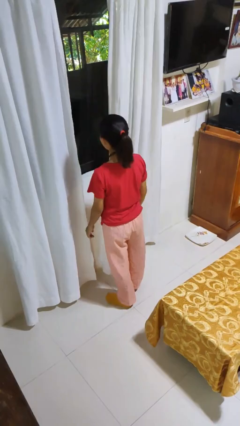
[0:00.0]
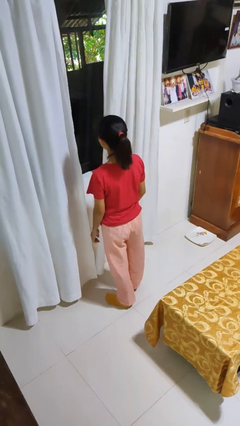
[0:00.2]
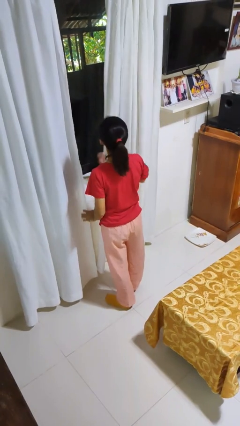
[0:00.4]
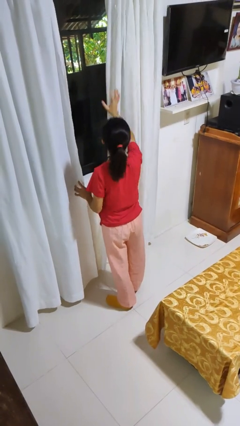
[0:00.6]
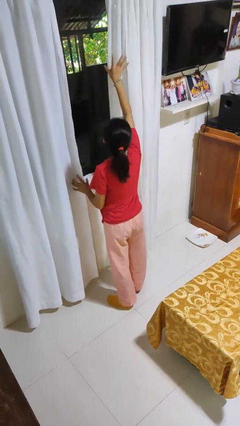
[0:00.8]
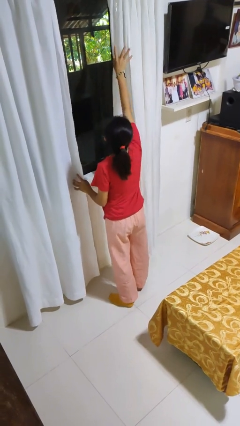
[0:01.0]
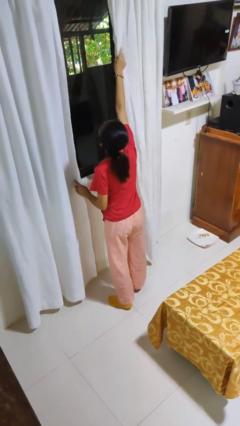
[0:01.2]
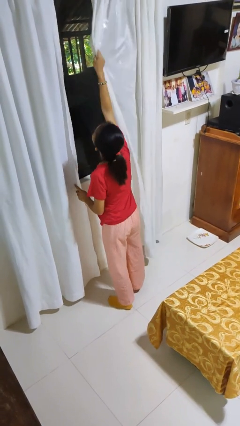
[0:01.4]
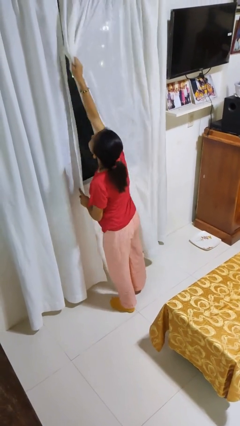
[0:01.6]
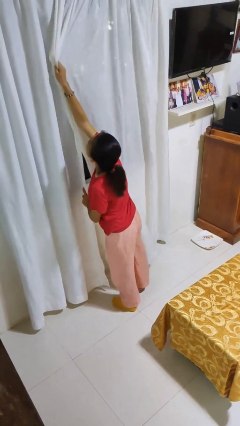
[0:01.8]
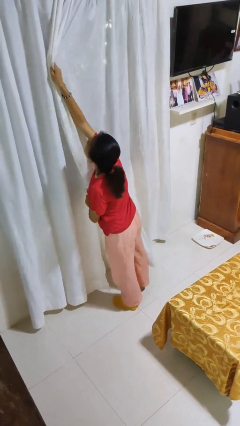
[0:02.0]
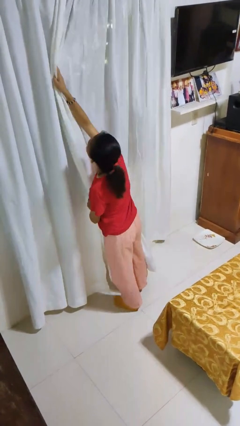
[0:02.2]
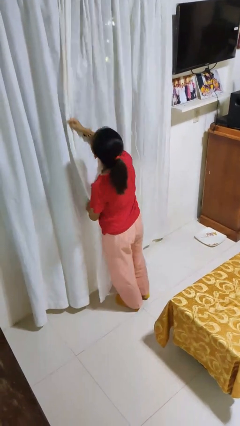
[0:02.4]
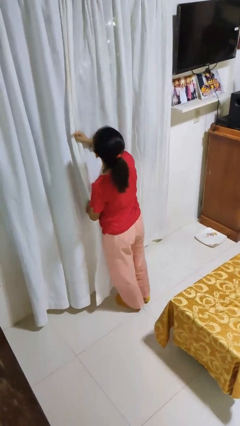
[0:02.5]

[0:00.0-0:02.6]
person closes curtains

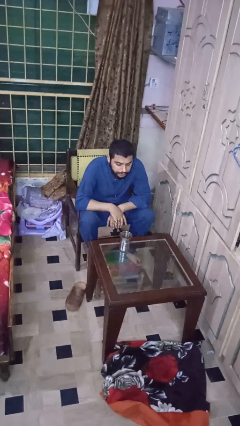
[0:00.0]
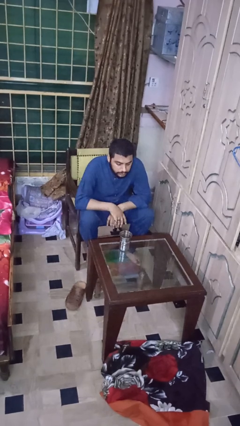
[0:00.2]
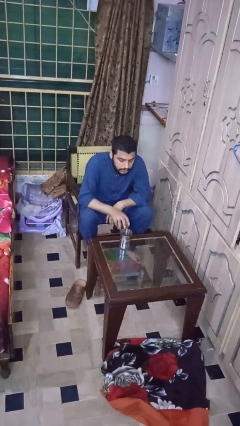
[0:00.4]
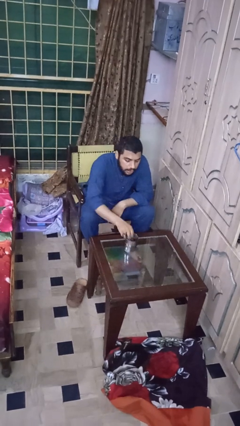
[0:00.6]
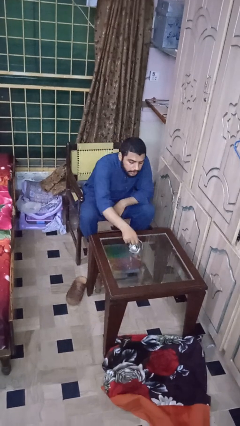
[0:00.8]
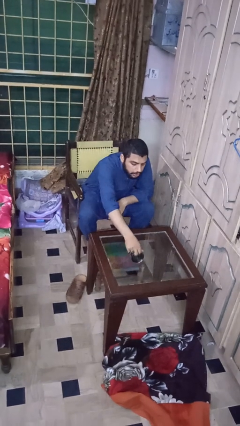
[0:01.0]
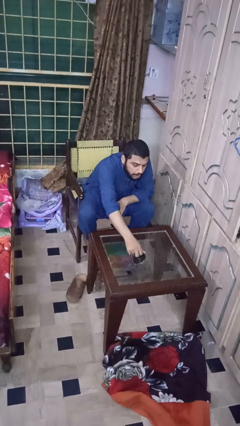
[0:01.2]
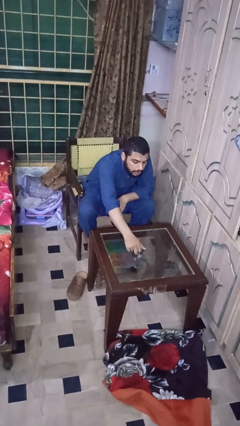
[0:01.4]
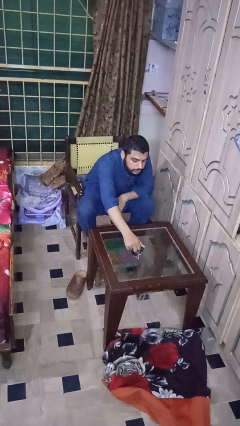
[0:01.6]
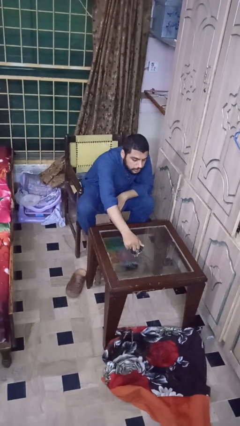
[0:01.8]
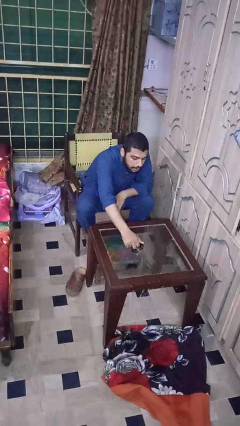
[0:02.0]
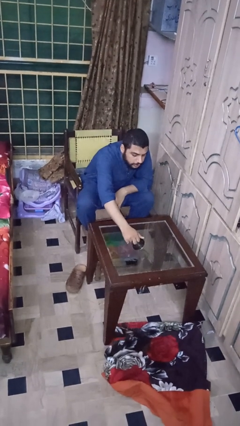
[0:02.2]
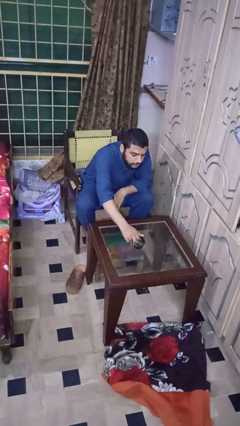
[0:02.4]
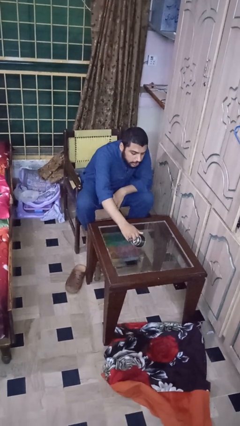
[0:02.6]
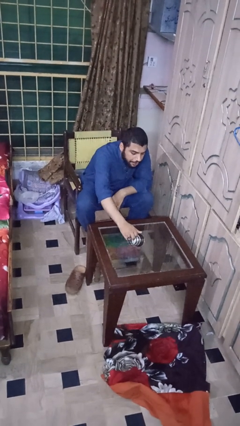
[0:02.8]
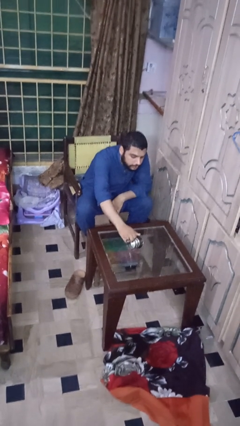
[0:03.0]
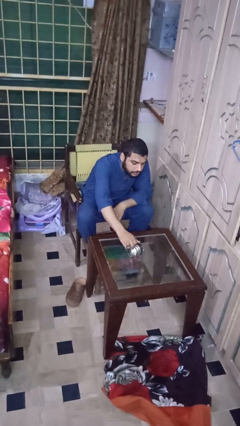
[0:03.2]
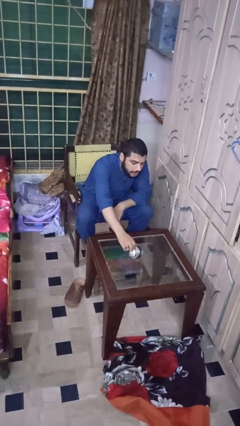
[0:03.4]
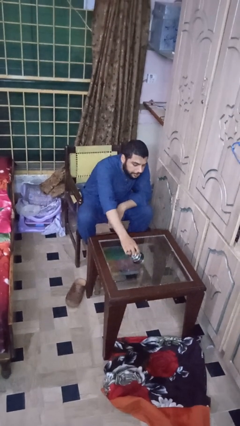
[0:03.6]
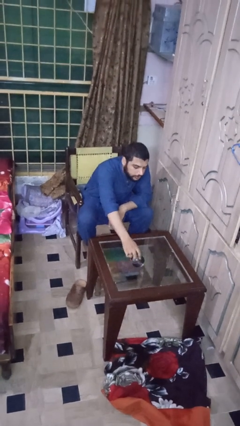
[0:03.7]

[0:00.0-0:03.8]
person spills on table

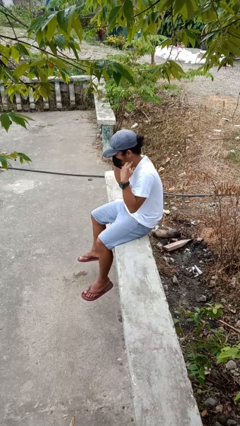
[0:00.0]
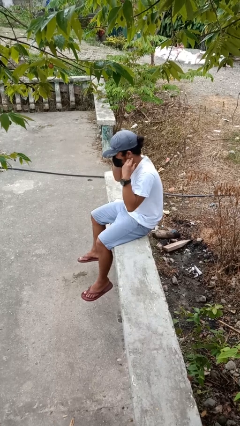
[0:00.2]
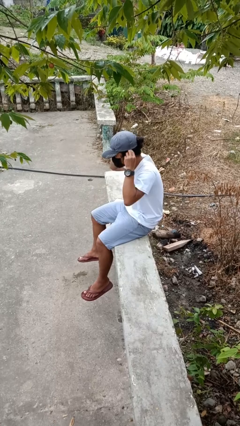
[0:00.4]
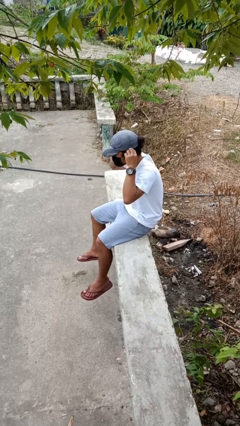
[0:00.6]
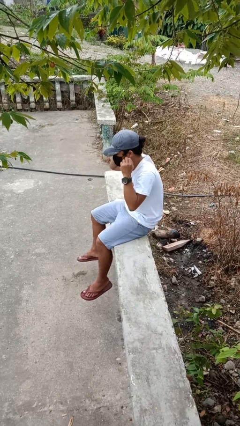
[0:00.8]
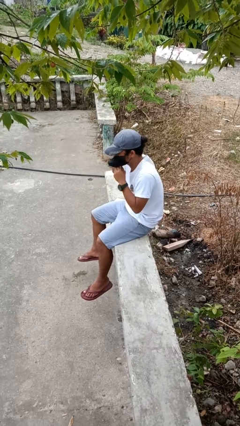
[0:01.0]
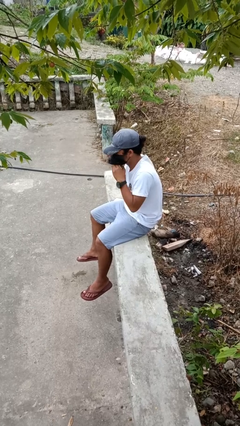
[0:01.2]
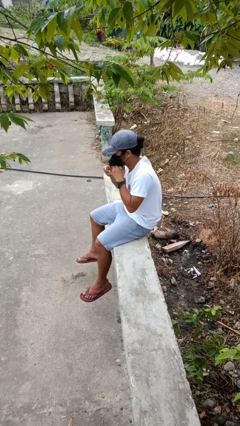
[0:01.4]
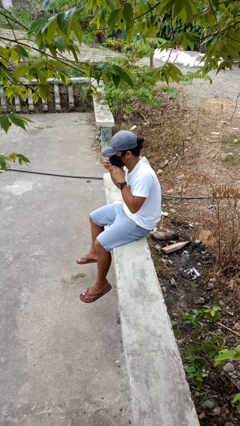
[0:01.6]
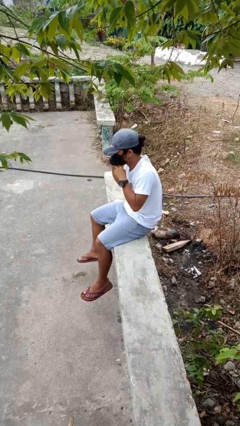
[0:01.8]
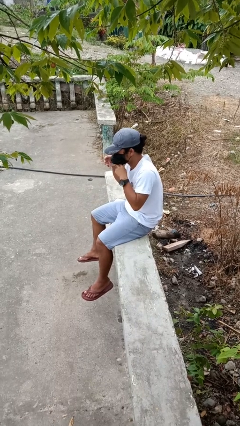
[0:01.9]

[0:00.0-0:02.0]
person puts on facemask

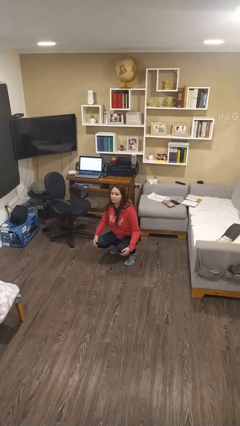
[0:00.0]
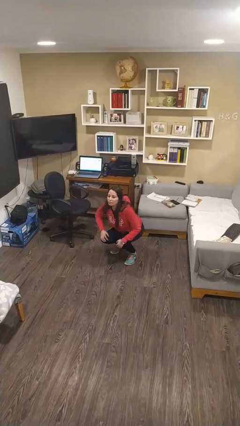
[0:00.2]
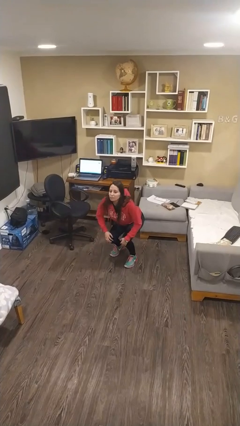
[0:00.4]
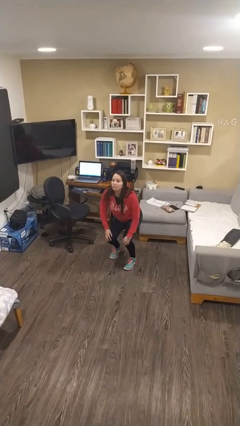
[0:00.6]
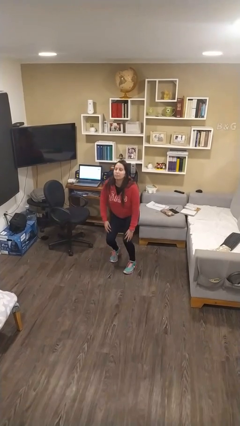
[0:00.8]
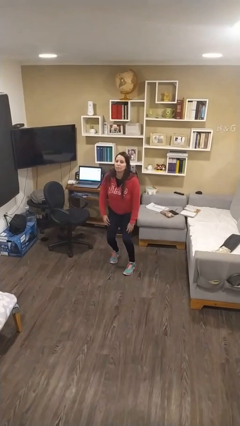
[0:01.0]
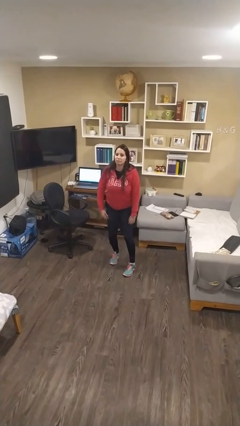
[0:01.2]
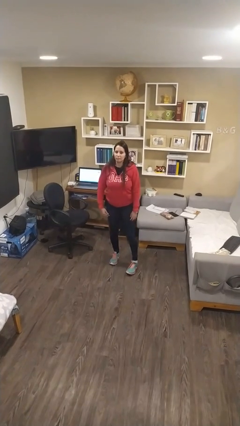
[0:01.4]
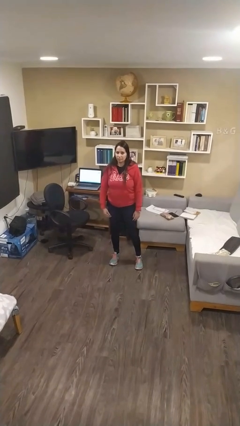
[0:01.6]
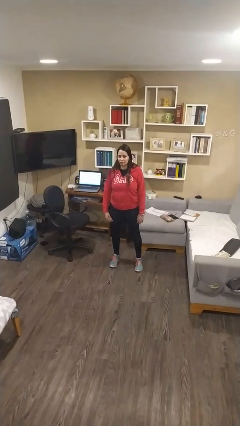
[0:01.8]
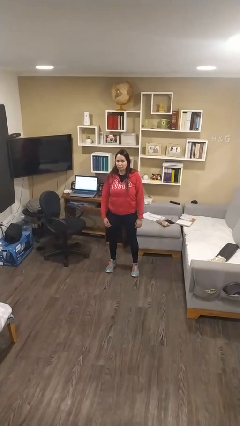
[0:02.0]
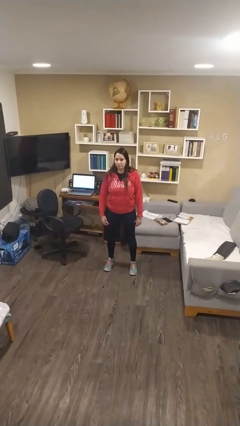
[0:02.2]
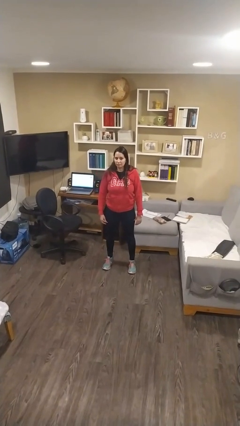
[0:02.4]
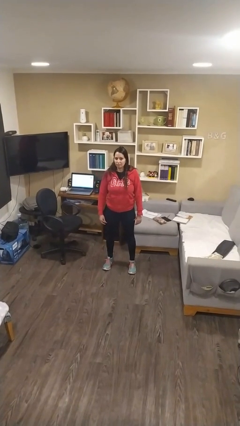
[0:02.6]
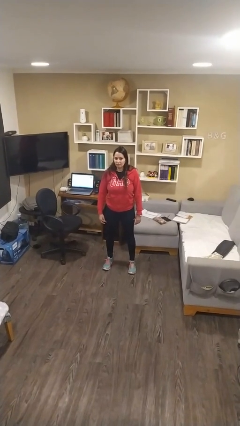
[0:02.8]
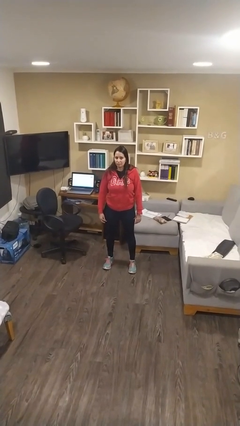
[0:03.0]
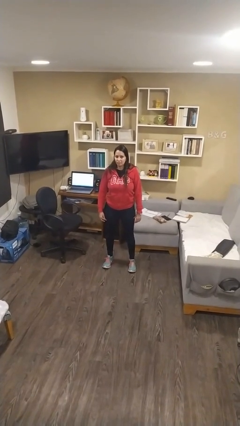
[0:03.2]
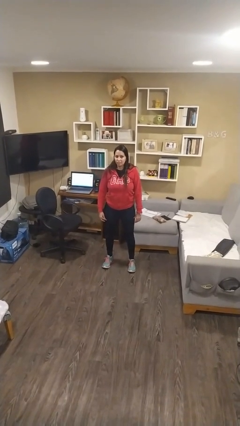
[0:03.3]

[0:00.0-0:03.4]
person stands up

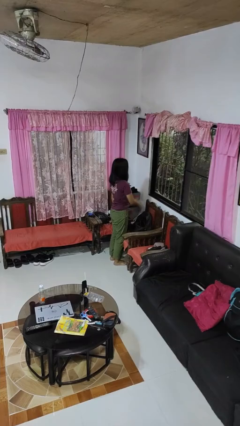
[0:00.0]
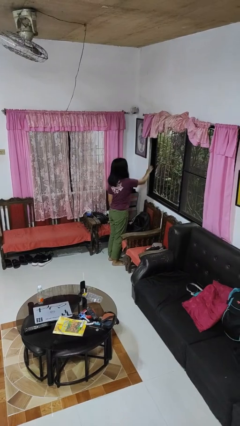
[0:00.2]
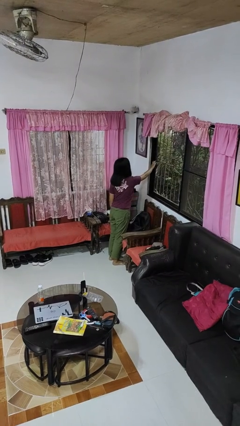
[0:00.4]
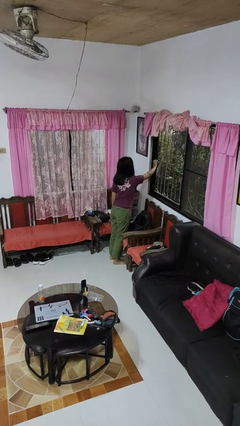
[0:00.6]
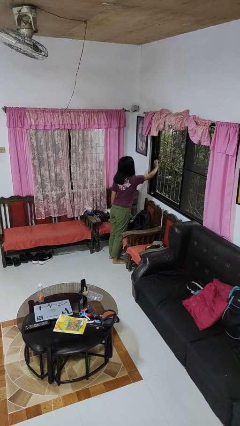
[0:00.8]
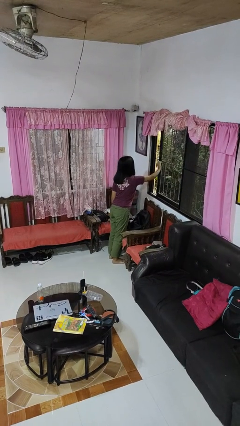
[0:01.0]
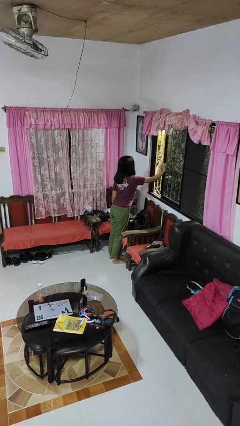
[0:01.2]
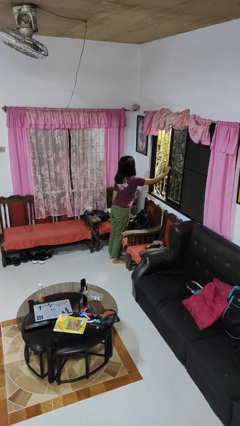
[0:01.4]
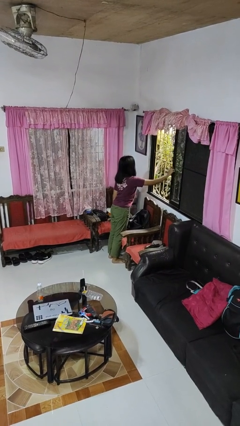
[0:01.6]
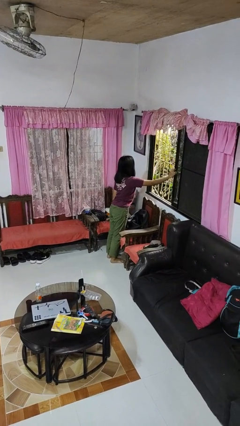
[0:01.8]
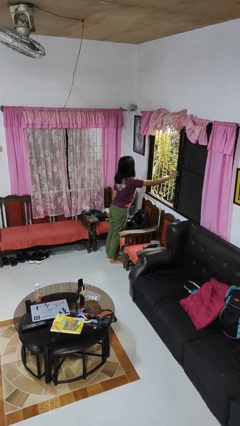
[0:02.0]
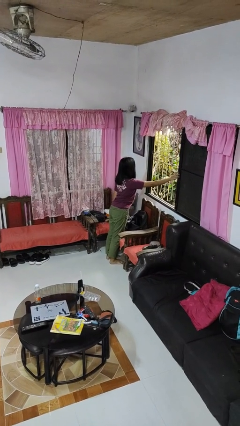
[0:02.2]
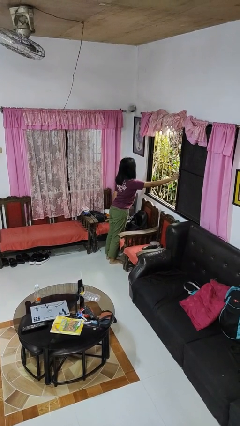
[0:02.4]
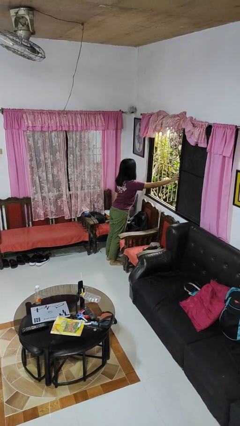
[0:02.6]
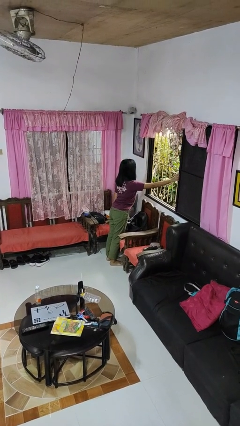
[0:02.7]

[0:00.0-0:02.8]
person opens home window

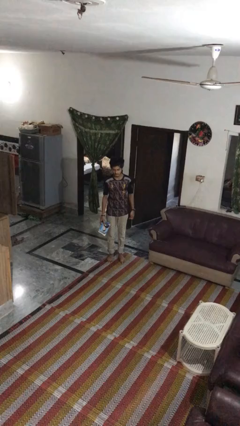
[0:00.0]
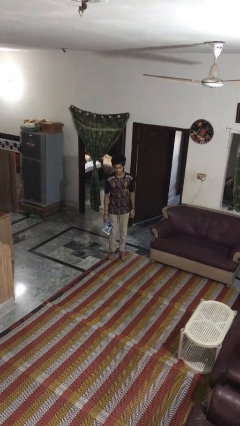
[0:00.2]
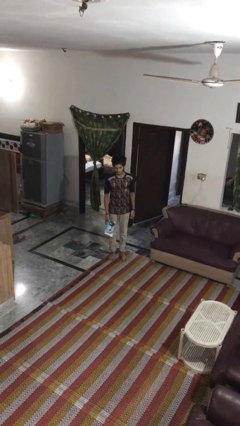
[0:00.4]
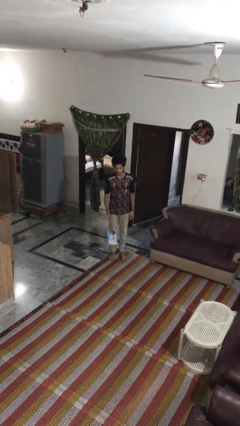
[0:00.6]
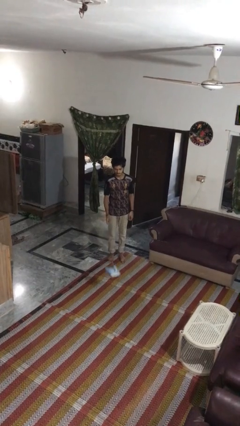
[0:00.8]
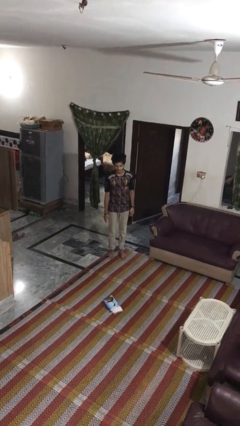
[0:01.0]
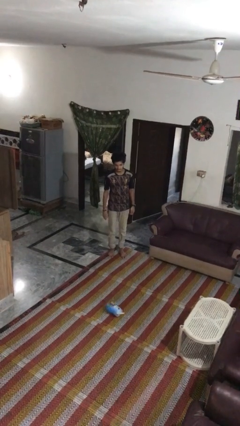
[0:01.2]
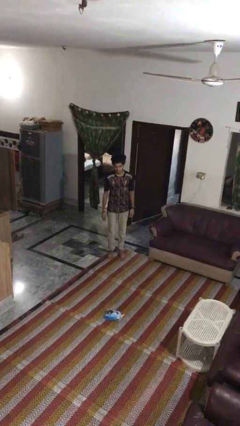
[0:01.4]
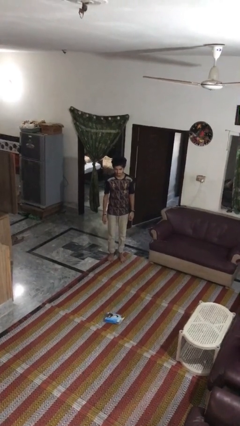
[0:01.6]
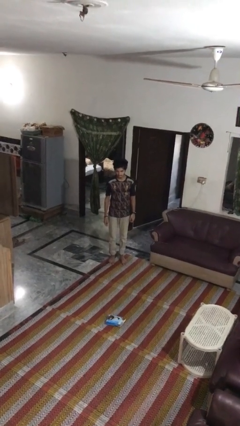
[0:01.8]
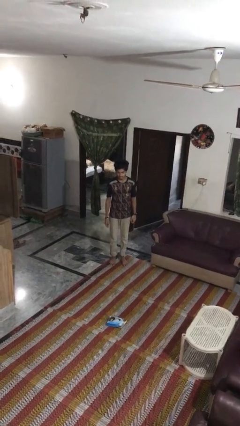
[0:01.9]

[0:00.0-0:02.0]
person throws object to ground

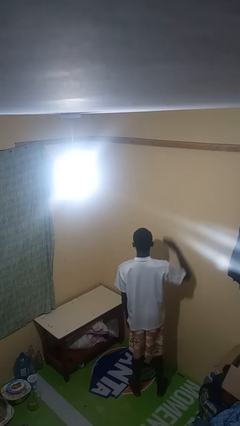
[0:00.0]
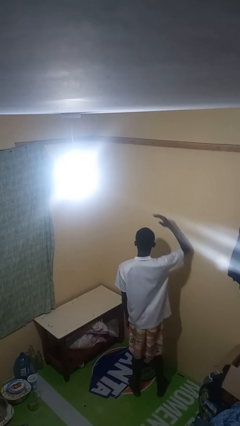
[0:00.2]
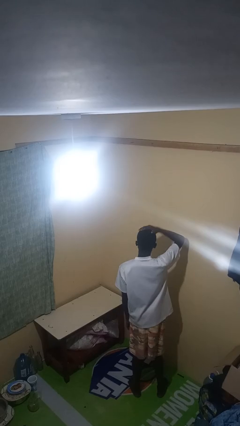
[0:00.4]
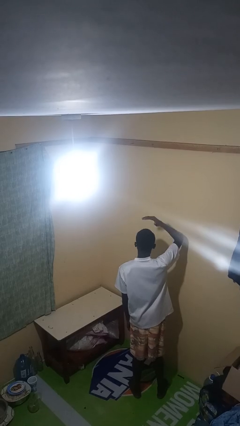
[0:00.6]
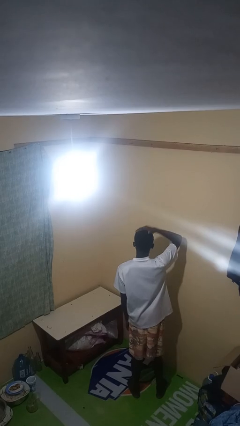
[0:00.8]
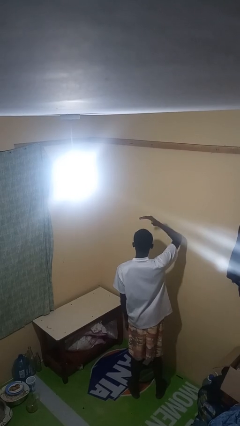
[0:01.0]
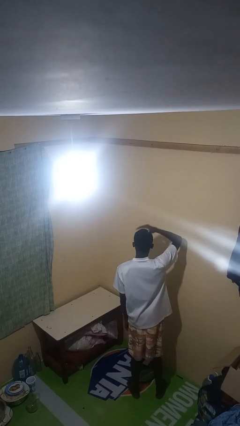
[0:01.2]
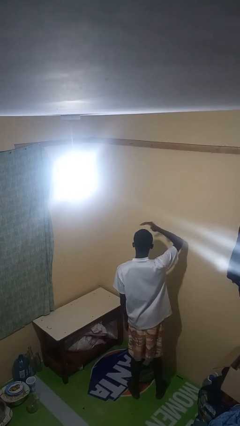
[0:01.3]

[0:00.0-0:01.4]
person pats head
